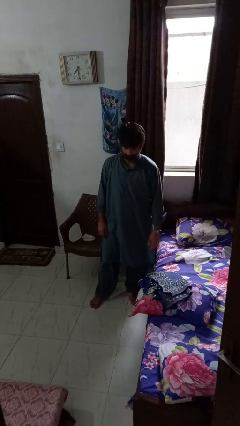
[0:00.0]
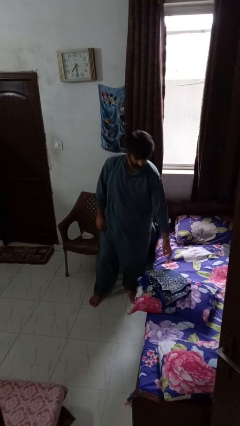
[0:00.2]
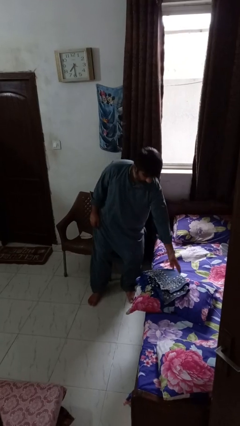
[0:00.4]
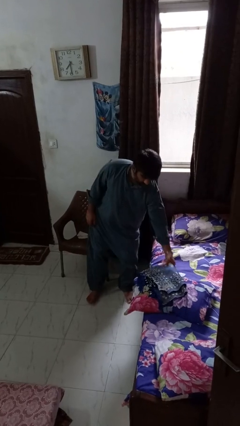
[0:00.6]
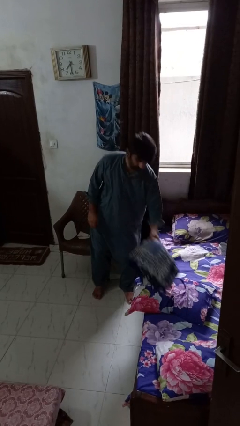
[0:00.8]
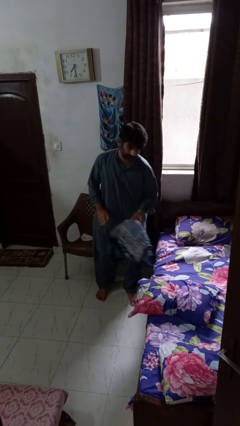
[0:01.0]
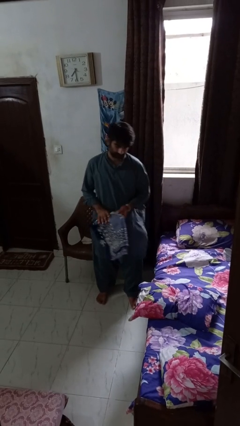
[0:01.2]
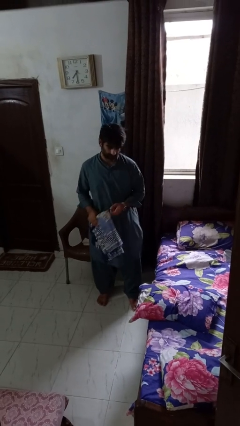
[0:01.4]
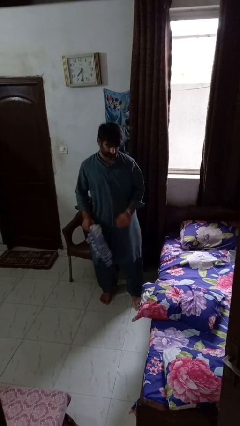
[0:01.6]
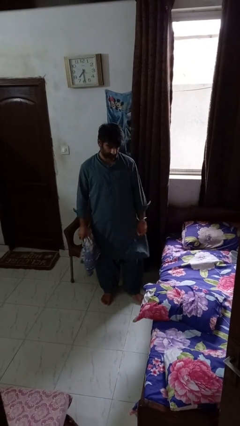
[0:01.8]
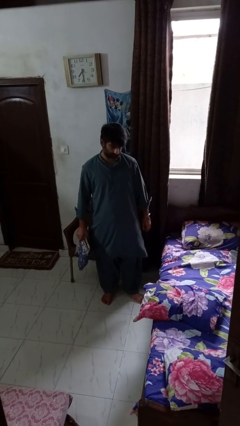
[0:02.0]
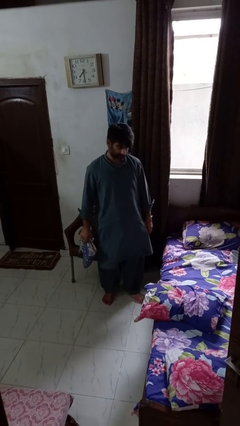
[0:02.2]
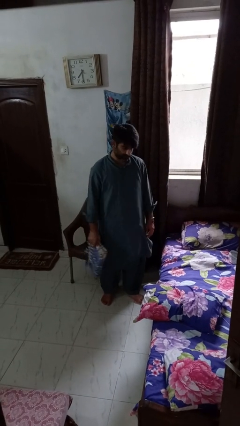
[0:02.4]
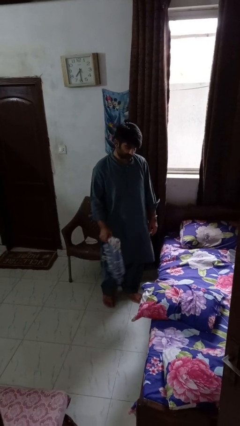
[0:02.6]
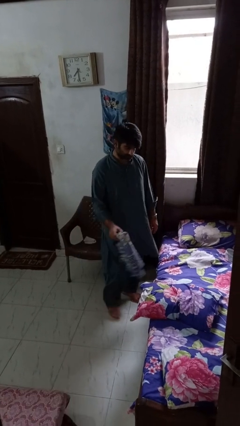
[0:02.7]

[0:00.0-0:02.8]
person picks up object from bed

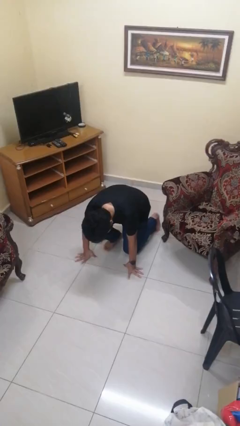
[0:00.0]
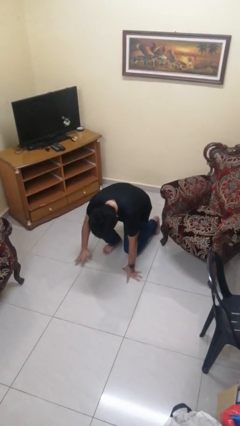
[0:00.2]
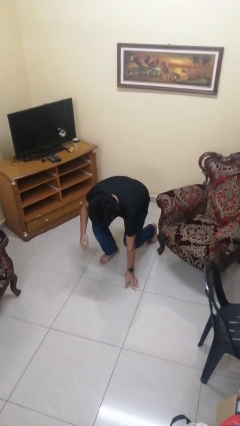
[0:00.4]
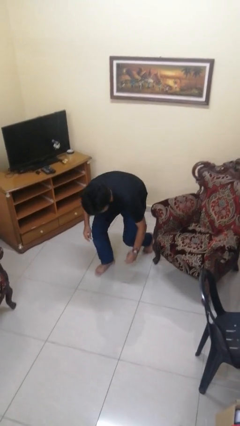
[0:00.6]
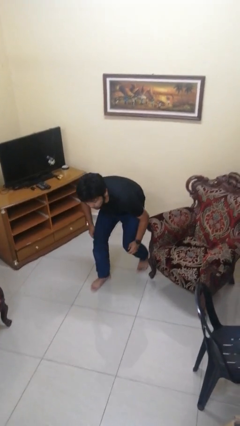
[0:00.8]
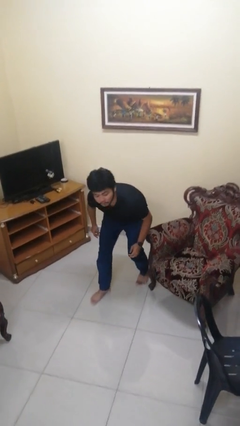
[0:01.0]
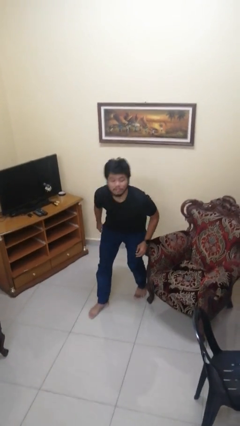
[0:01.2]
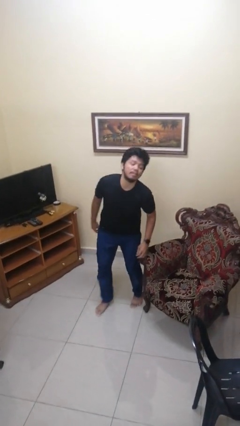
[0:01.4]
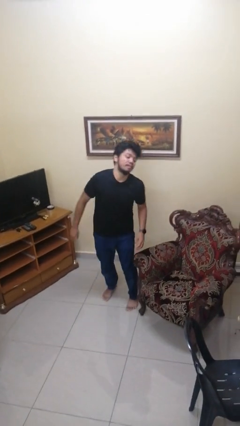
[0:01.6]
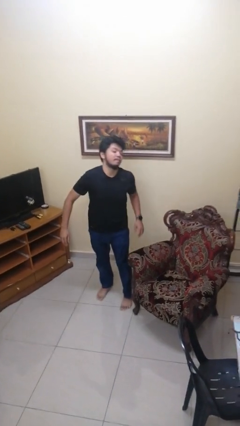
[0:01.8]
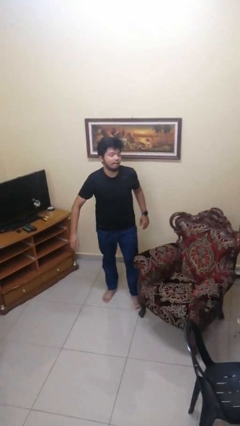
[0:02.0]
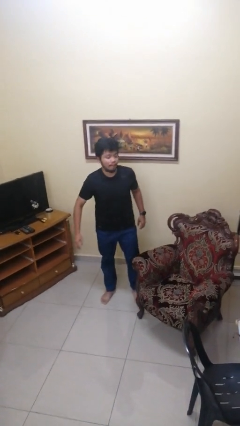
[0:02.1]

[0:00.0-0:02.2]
person stands up from floor

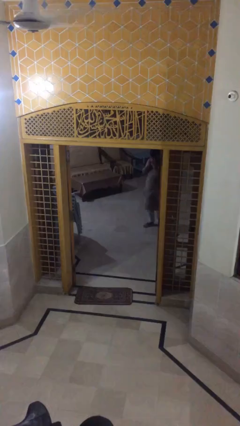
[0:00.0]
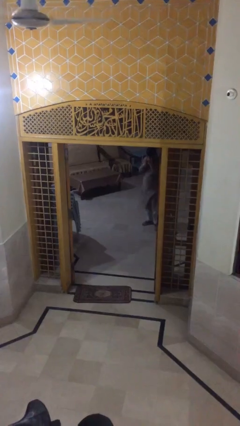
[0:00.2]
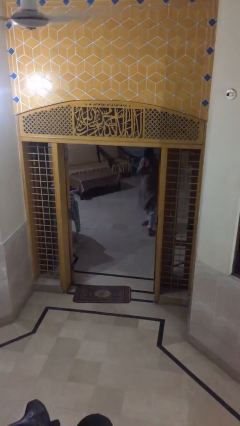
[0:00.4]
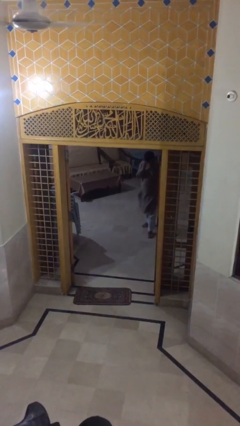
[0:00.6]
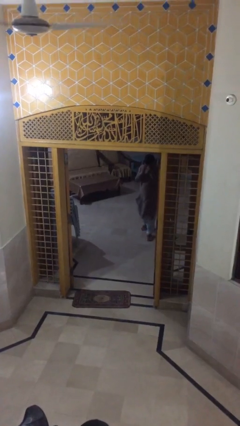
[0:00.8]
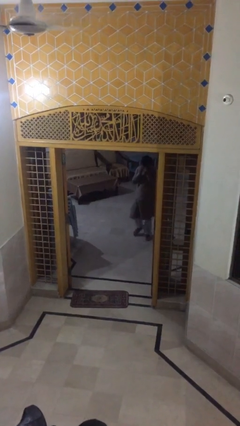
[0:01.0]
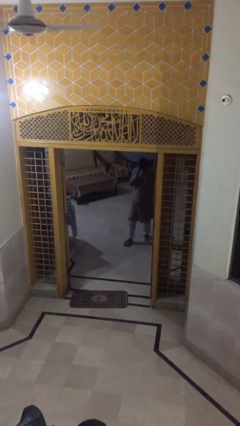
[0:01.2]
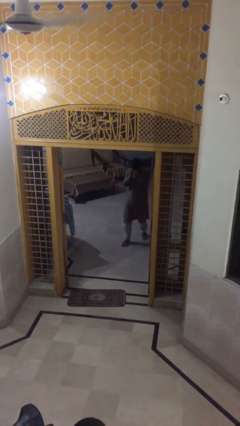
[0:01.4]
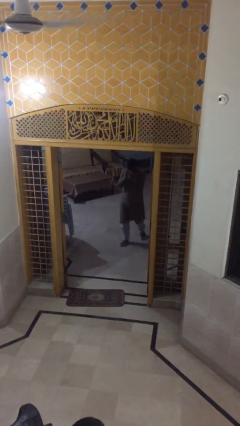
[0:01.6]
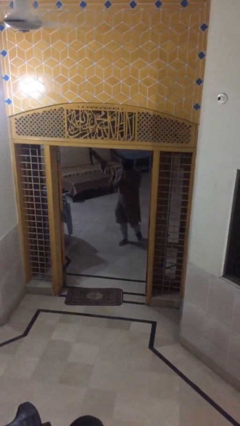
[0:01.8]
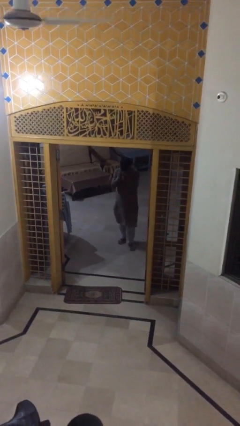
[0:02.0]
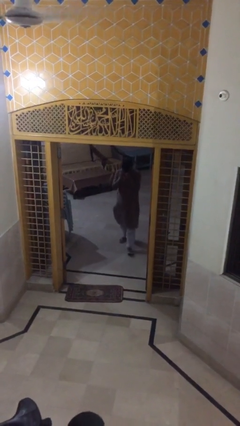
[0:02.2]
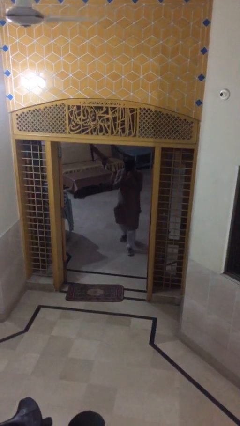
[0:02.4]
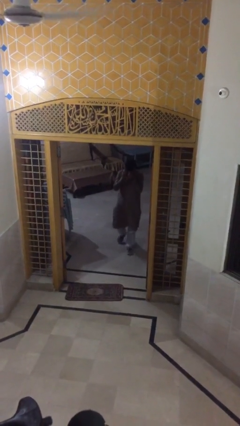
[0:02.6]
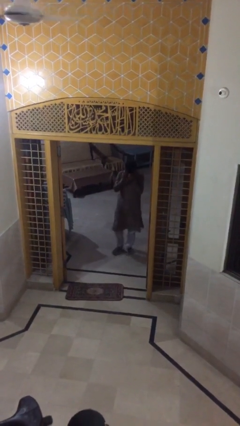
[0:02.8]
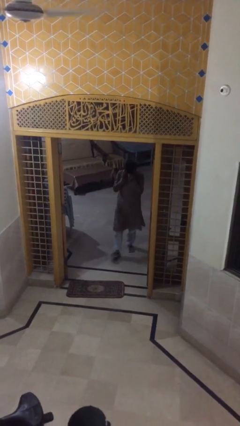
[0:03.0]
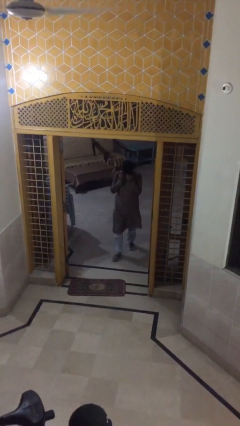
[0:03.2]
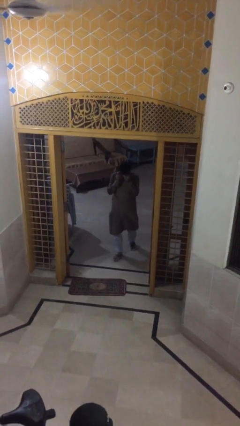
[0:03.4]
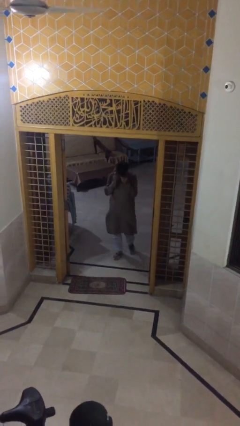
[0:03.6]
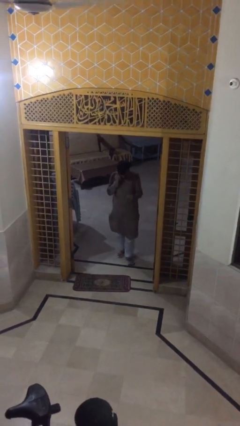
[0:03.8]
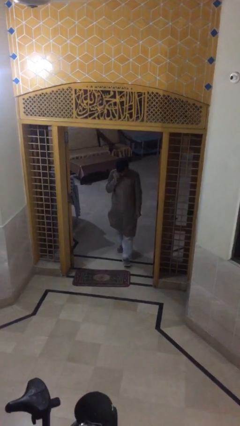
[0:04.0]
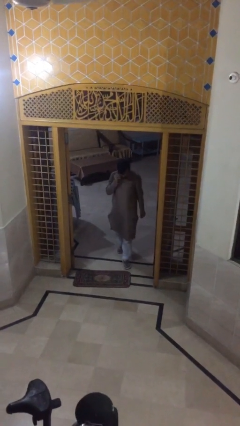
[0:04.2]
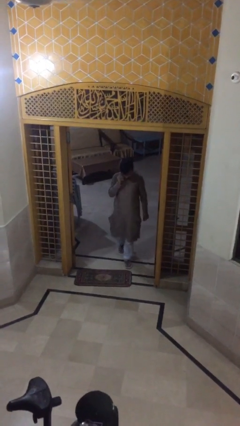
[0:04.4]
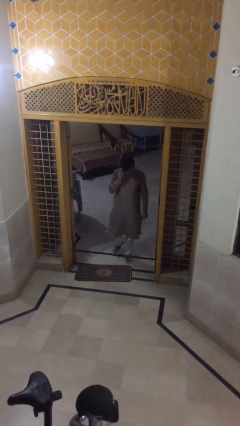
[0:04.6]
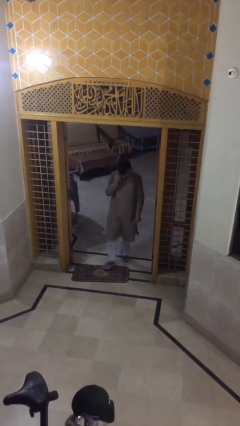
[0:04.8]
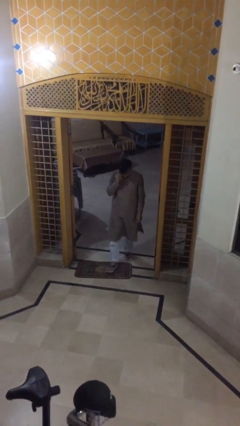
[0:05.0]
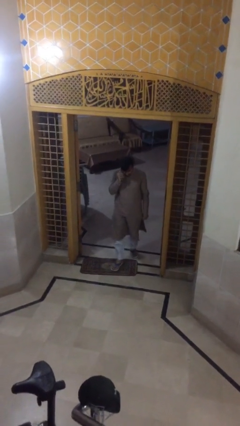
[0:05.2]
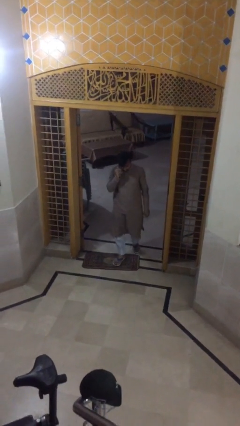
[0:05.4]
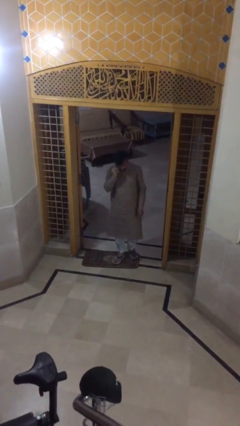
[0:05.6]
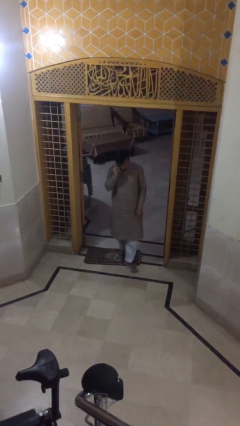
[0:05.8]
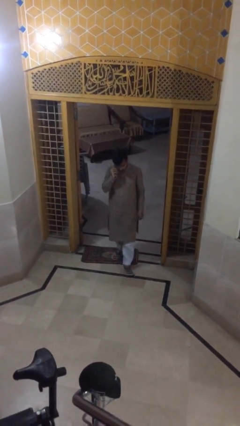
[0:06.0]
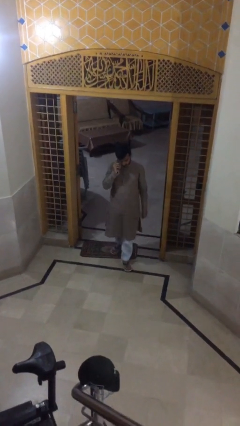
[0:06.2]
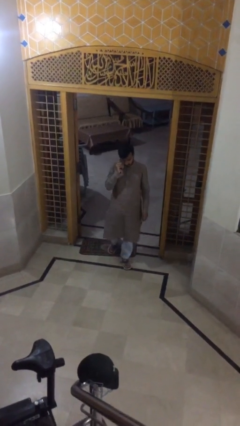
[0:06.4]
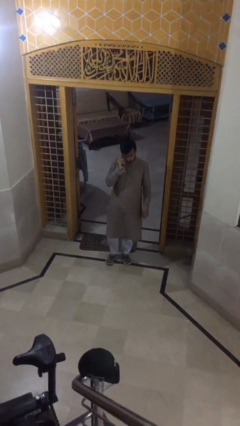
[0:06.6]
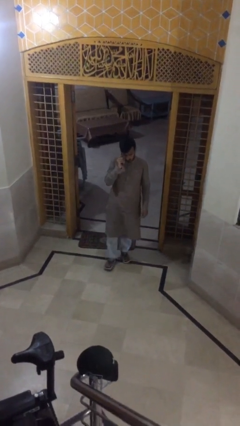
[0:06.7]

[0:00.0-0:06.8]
person enters scene through structure

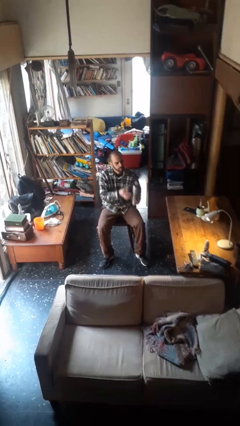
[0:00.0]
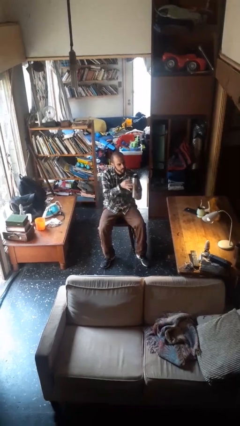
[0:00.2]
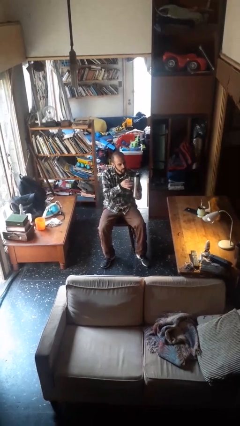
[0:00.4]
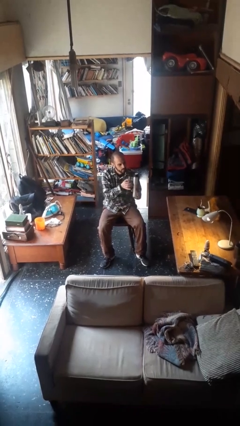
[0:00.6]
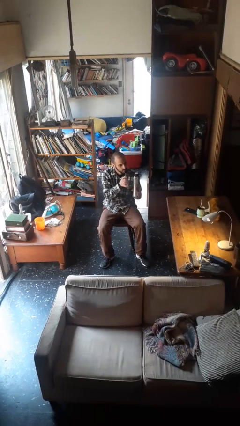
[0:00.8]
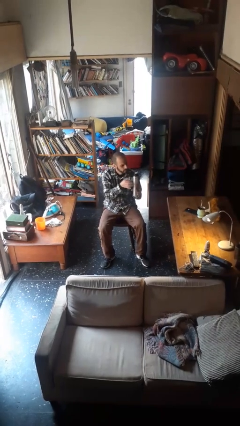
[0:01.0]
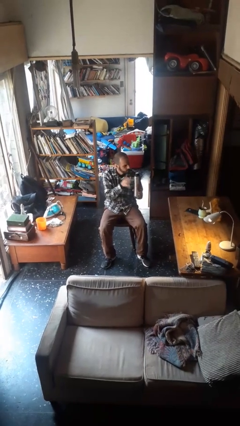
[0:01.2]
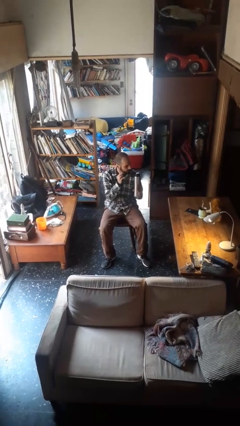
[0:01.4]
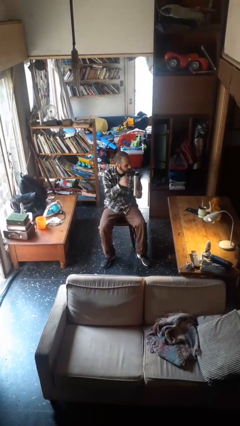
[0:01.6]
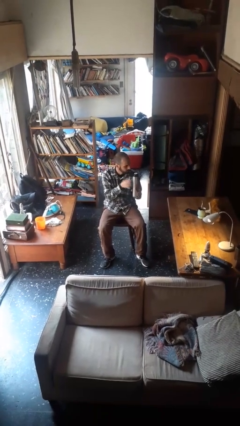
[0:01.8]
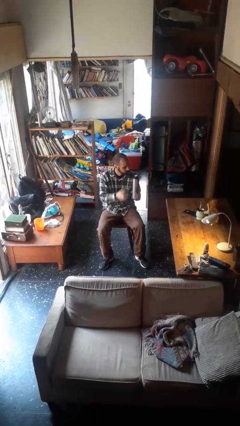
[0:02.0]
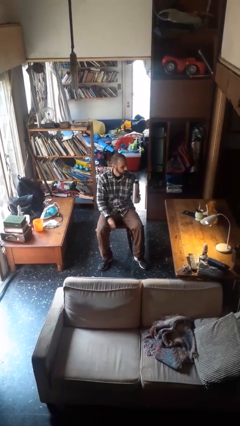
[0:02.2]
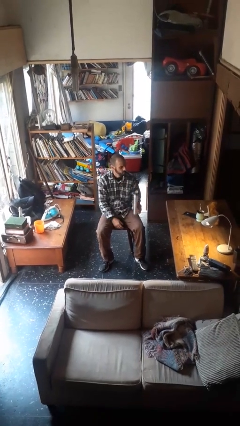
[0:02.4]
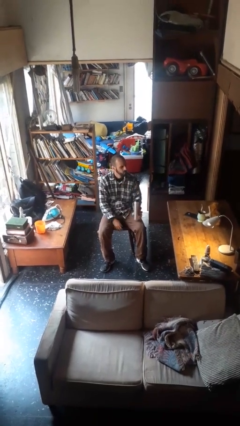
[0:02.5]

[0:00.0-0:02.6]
person taps object with finger

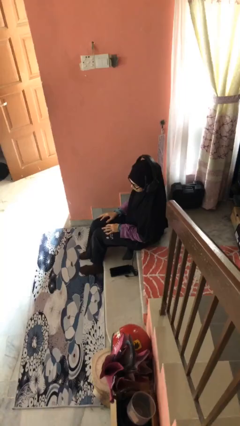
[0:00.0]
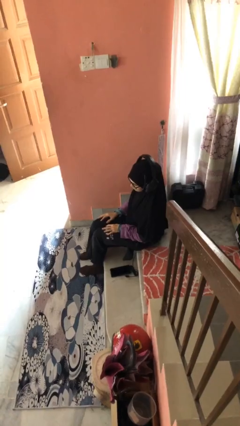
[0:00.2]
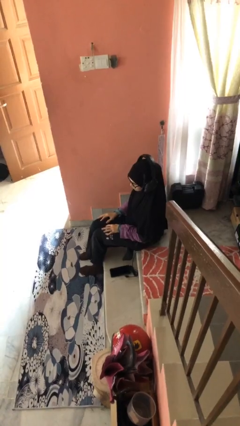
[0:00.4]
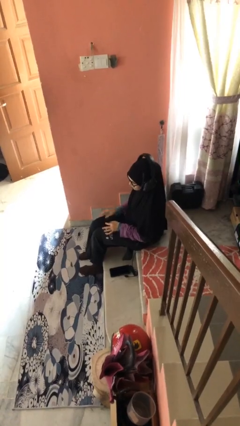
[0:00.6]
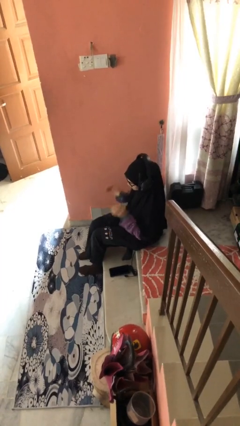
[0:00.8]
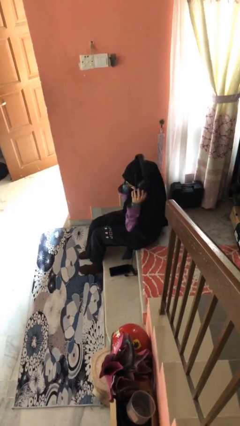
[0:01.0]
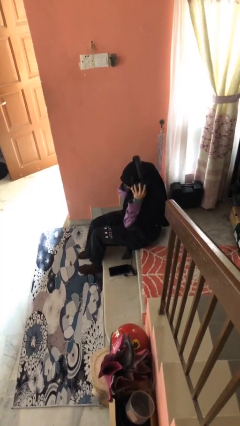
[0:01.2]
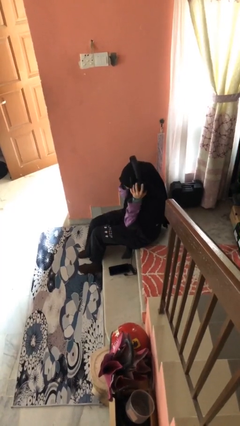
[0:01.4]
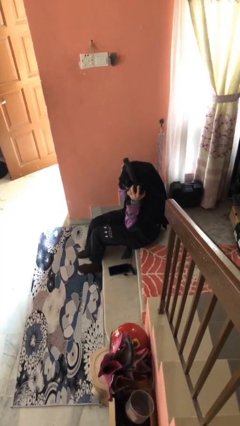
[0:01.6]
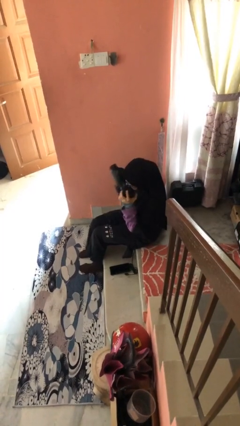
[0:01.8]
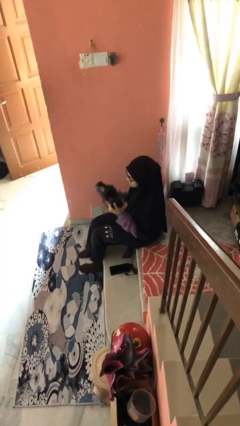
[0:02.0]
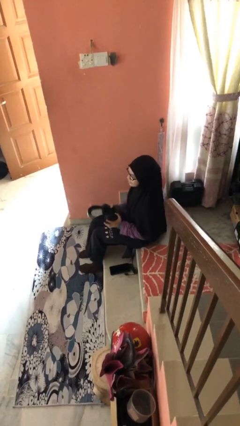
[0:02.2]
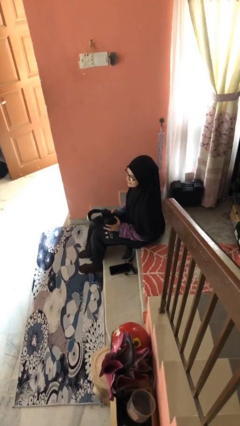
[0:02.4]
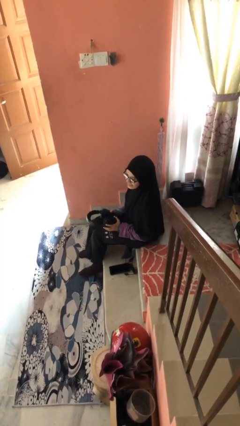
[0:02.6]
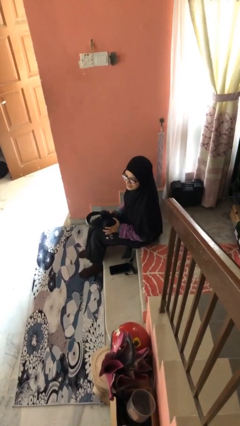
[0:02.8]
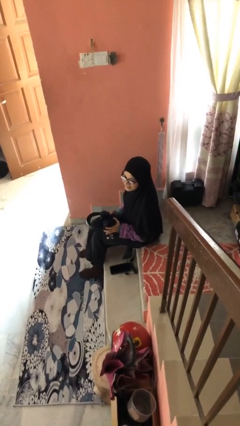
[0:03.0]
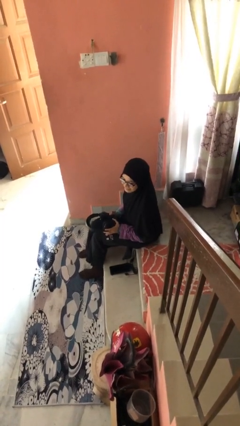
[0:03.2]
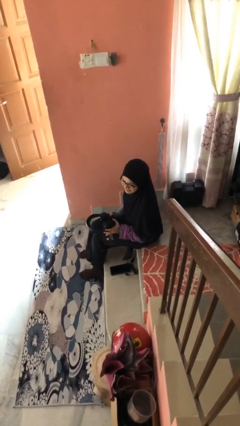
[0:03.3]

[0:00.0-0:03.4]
person takes off headphones

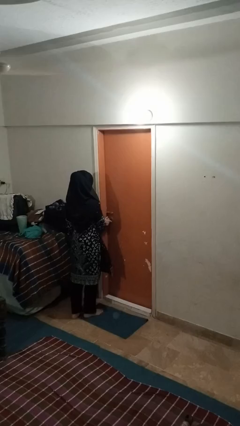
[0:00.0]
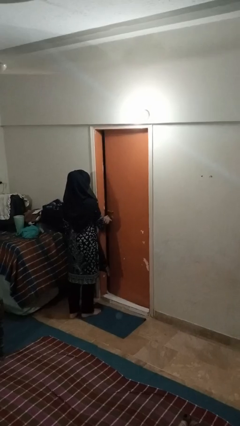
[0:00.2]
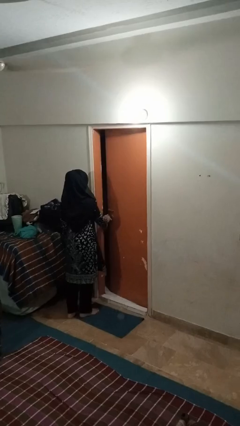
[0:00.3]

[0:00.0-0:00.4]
person unlocks door with keys
